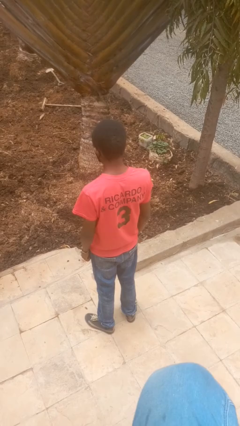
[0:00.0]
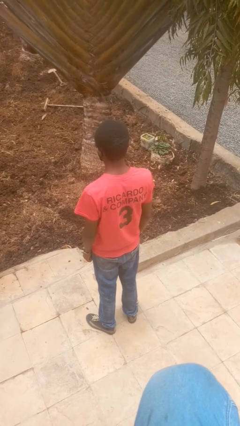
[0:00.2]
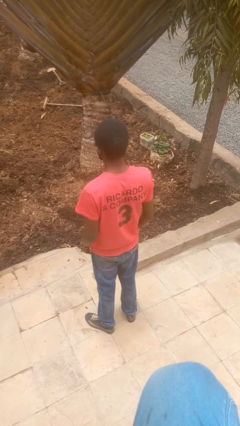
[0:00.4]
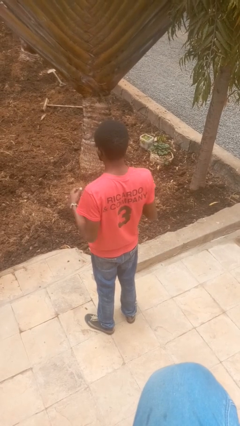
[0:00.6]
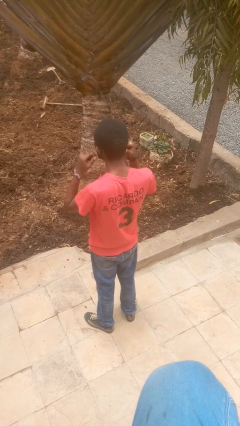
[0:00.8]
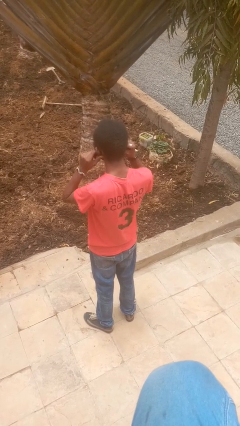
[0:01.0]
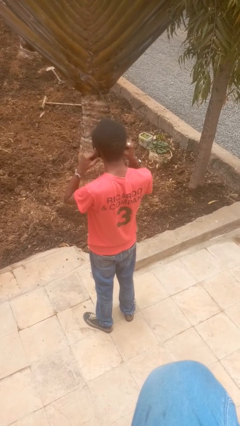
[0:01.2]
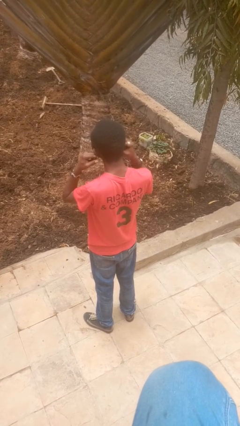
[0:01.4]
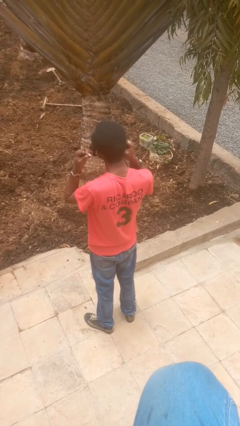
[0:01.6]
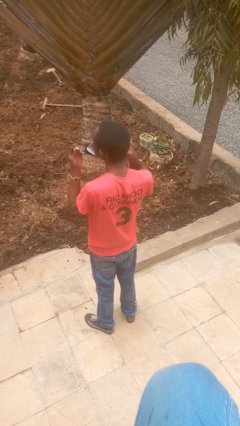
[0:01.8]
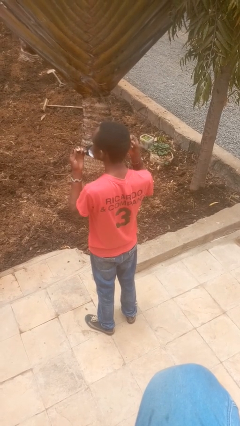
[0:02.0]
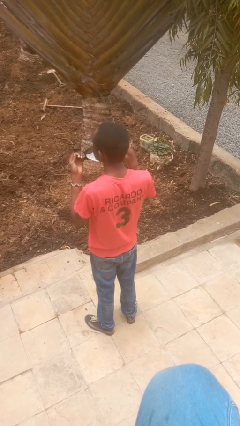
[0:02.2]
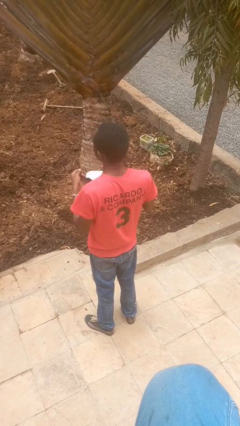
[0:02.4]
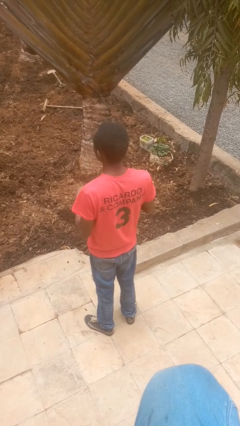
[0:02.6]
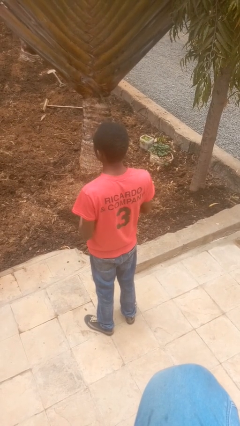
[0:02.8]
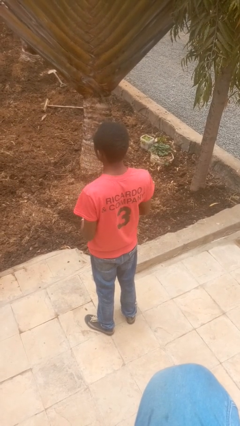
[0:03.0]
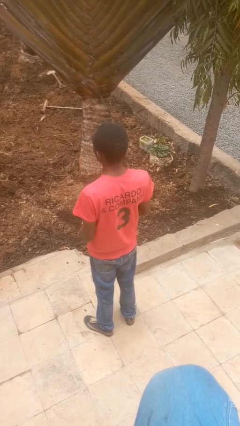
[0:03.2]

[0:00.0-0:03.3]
person takes off facemask

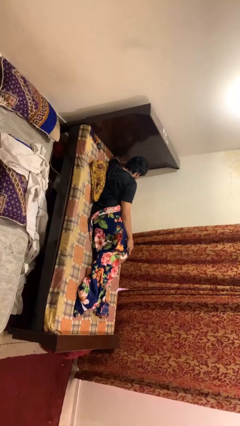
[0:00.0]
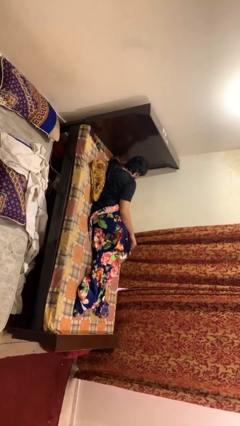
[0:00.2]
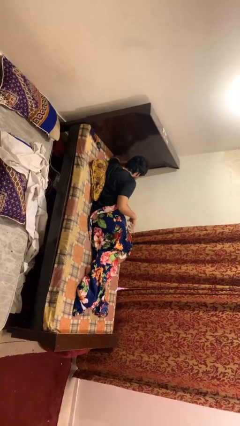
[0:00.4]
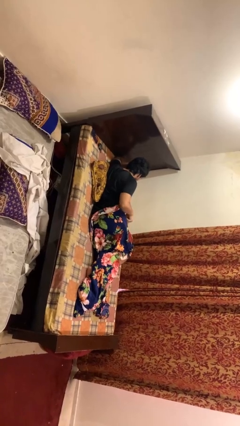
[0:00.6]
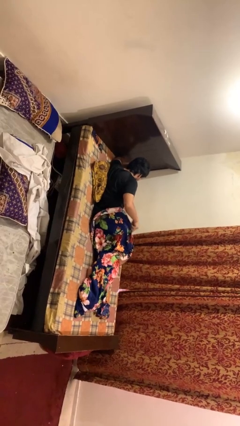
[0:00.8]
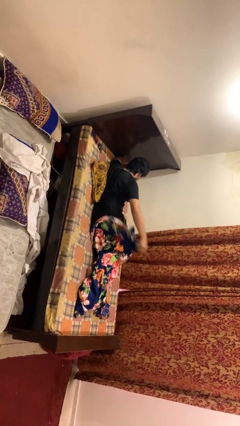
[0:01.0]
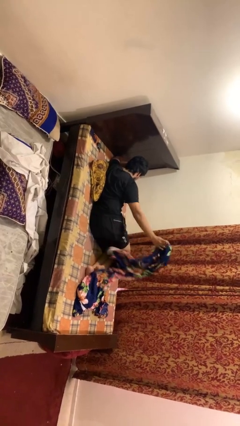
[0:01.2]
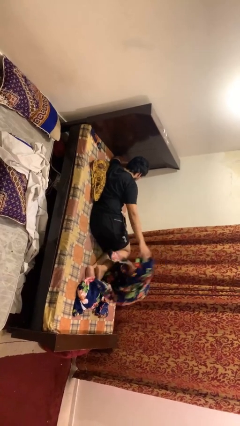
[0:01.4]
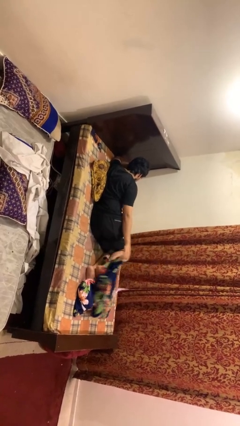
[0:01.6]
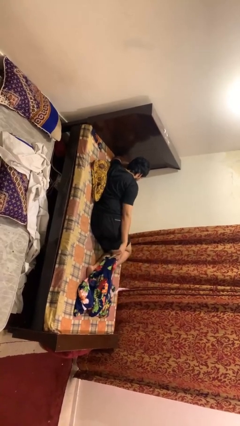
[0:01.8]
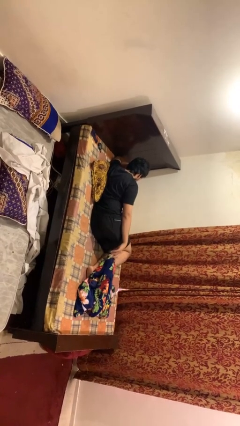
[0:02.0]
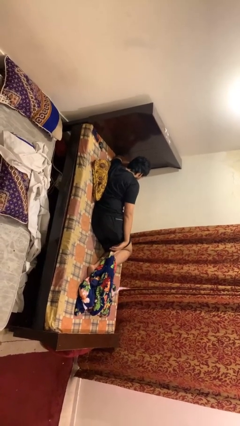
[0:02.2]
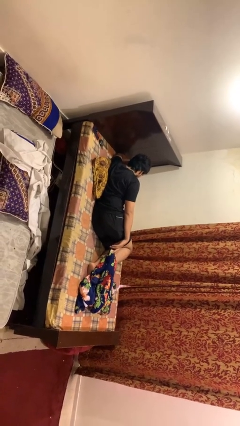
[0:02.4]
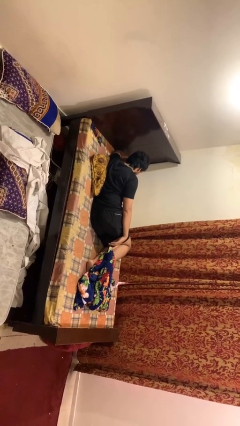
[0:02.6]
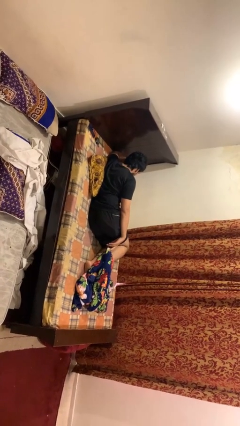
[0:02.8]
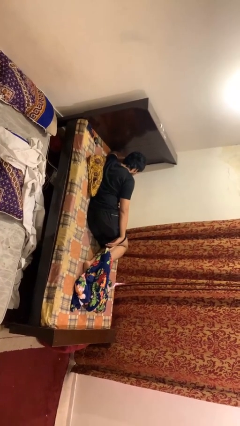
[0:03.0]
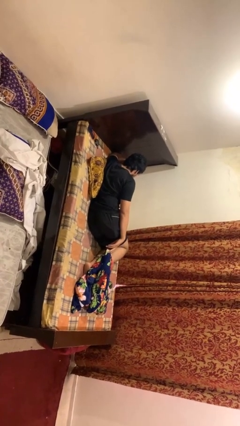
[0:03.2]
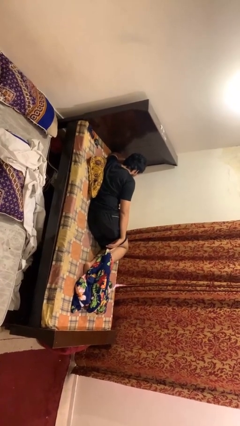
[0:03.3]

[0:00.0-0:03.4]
person uncovers with blanket

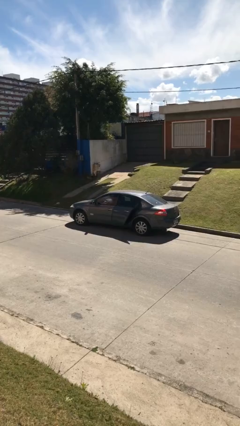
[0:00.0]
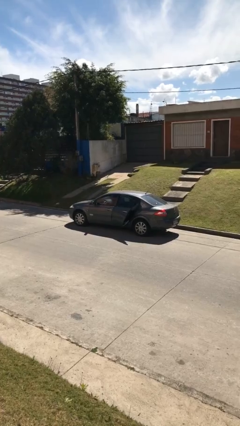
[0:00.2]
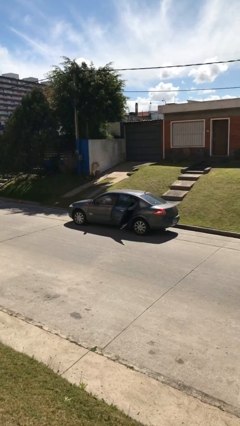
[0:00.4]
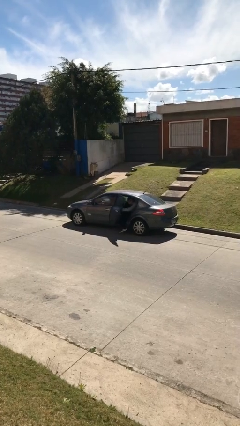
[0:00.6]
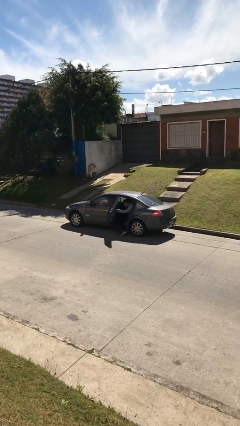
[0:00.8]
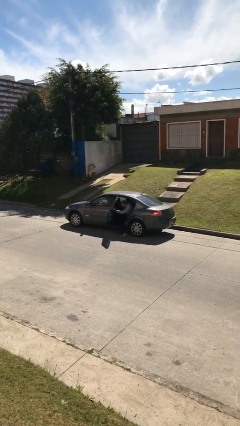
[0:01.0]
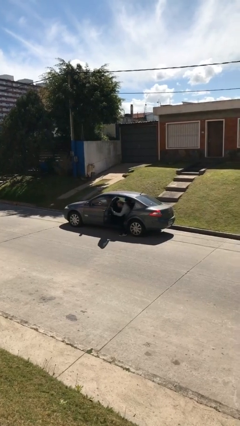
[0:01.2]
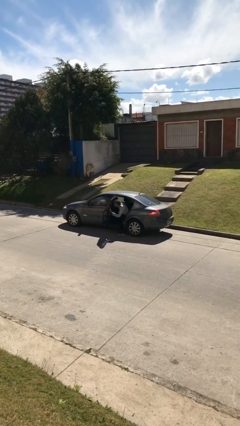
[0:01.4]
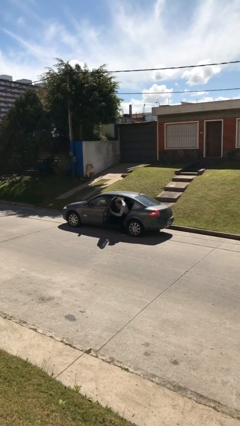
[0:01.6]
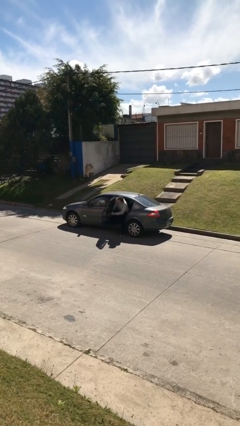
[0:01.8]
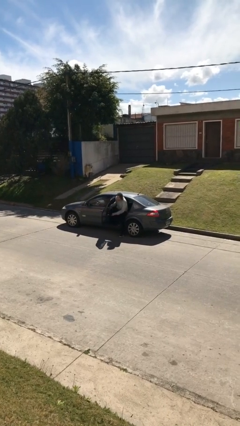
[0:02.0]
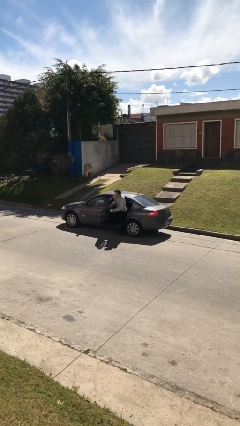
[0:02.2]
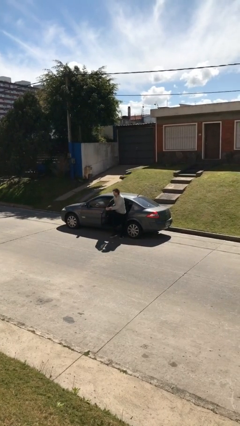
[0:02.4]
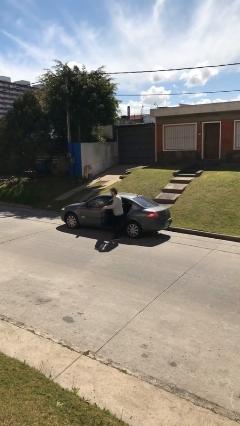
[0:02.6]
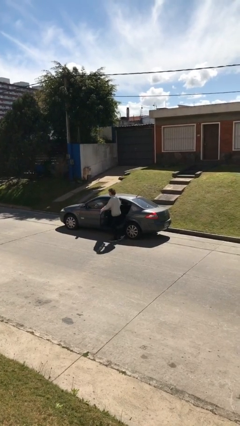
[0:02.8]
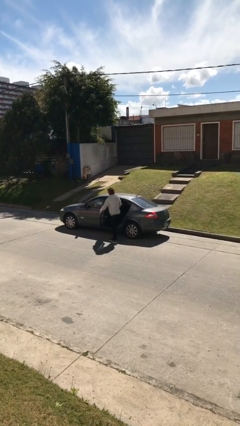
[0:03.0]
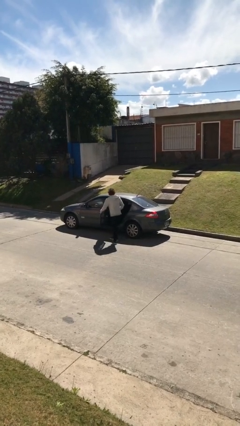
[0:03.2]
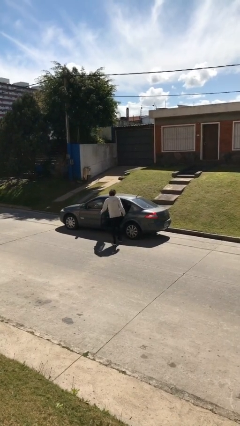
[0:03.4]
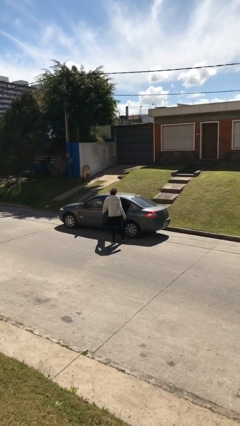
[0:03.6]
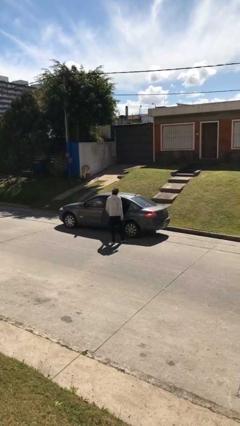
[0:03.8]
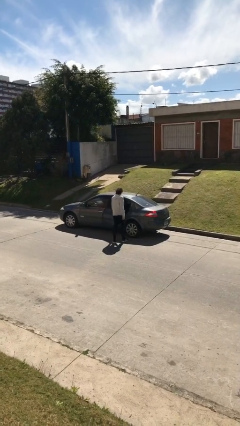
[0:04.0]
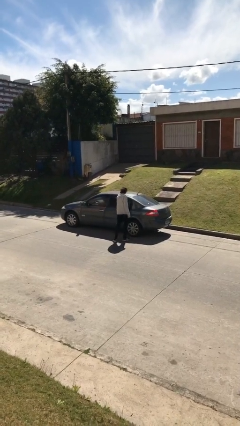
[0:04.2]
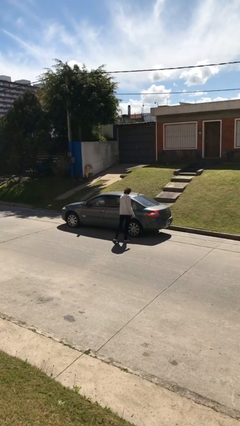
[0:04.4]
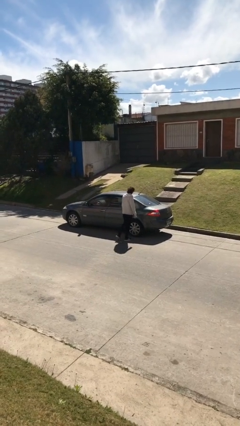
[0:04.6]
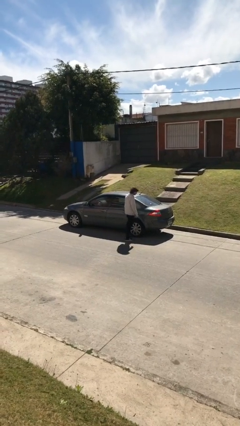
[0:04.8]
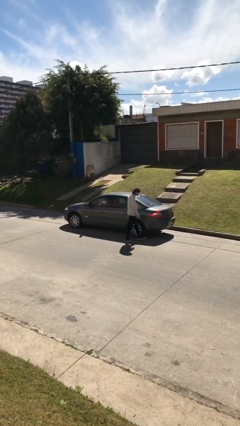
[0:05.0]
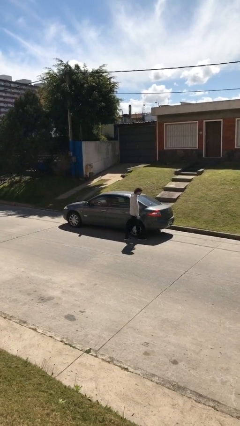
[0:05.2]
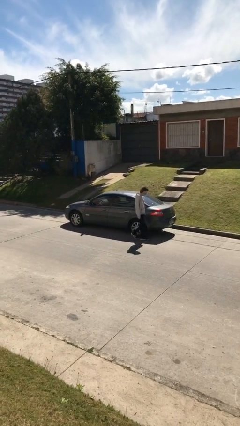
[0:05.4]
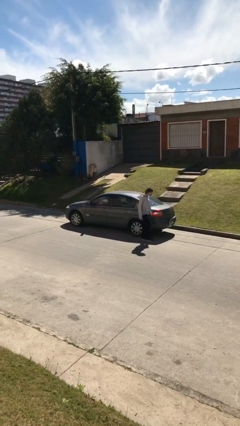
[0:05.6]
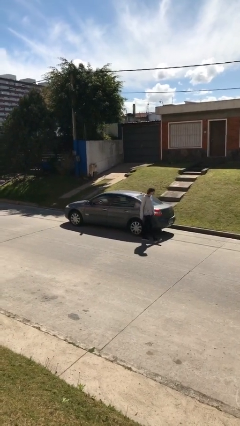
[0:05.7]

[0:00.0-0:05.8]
car drops off person

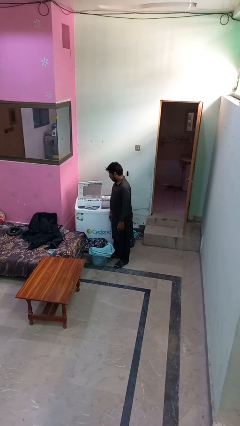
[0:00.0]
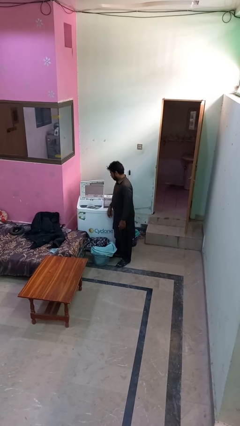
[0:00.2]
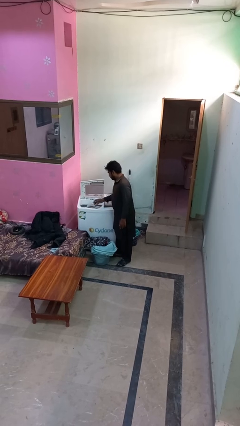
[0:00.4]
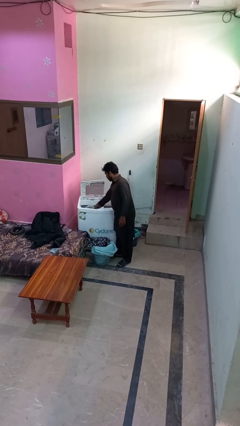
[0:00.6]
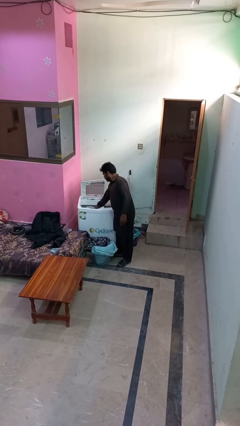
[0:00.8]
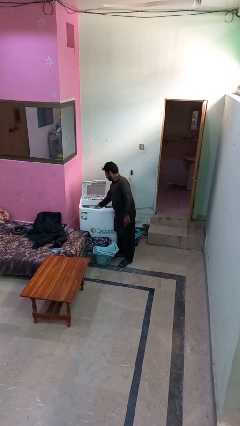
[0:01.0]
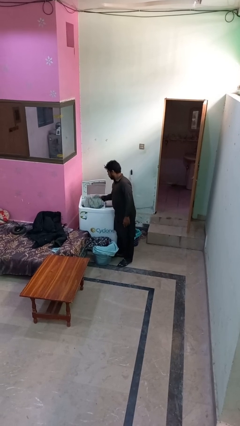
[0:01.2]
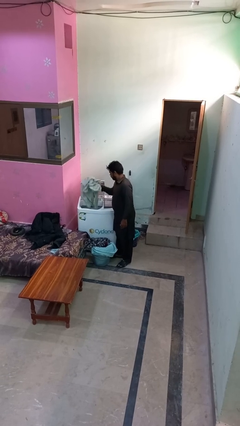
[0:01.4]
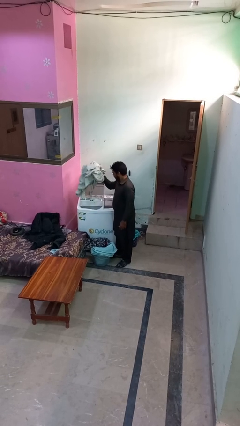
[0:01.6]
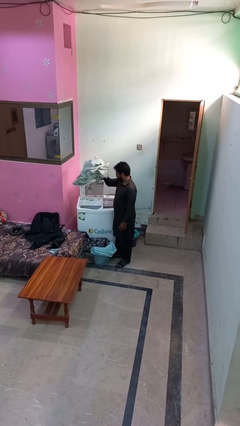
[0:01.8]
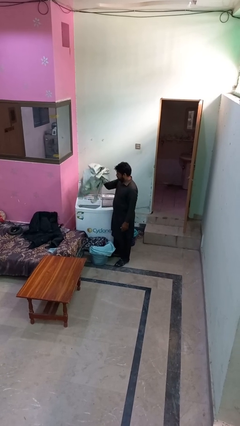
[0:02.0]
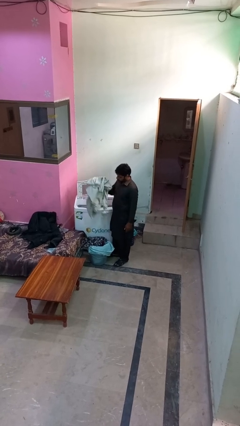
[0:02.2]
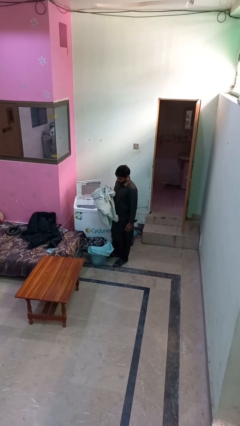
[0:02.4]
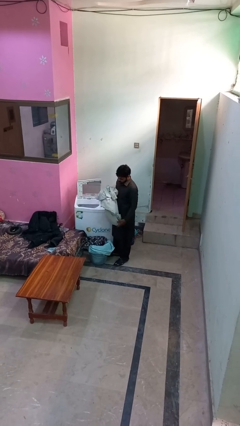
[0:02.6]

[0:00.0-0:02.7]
person unloads clotheswasher

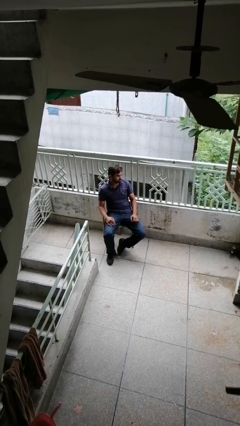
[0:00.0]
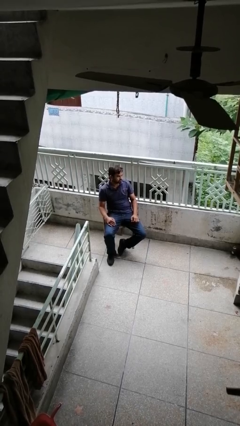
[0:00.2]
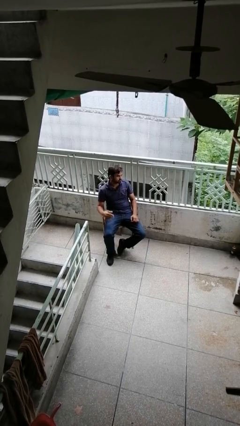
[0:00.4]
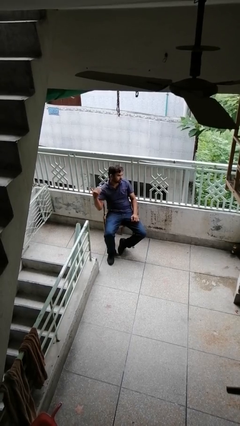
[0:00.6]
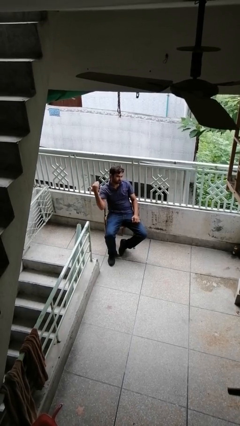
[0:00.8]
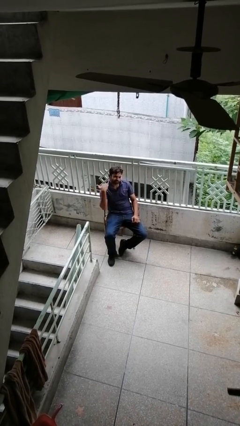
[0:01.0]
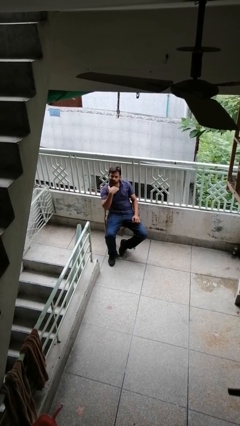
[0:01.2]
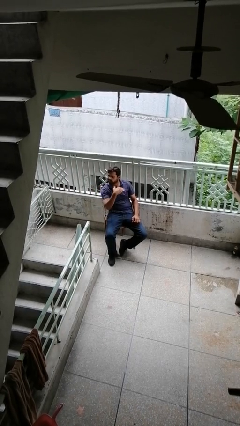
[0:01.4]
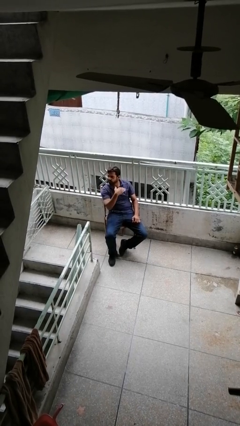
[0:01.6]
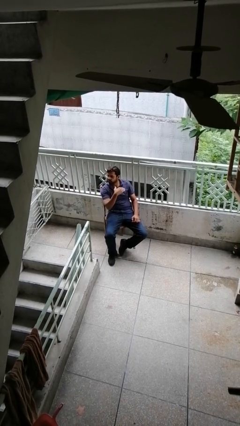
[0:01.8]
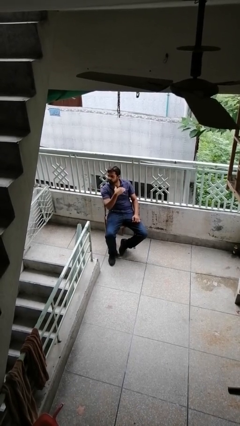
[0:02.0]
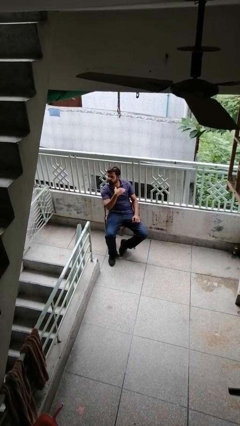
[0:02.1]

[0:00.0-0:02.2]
person gestures cut

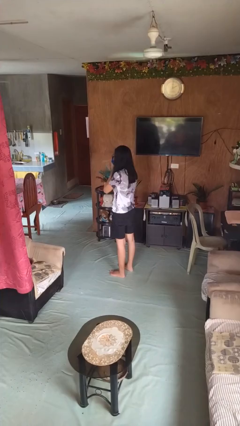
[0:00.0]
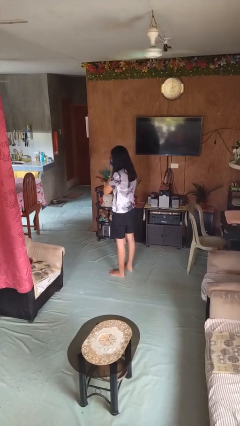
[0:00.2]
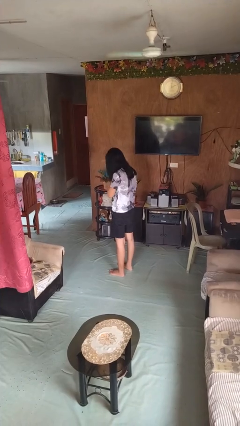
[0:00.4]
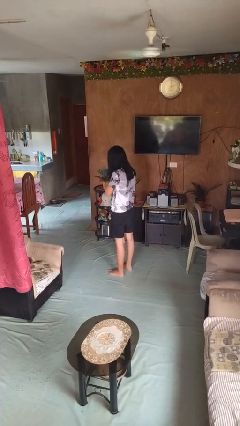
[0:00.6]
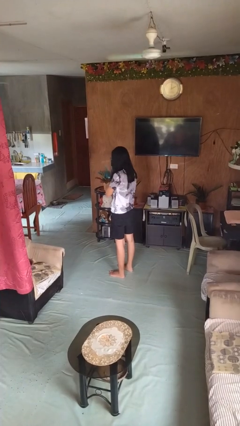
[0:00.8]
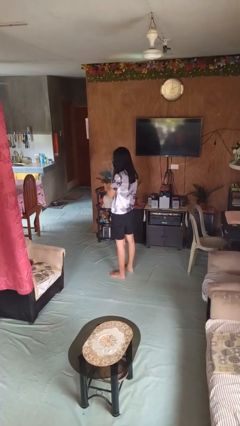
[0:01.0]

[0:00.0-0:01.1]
person blows nose
